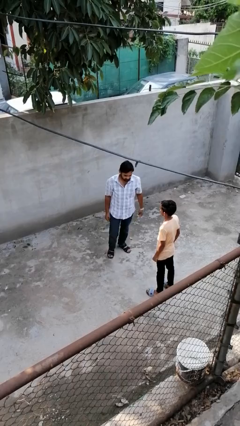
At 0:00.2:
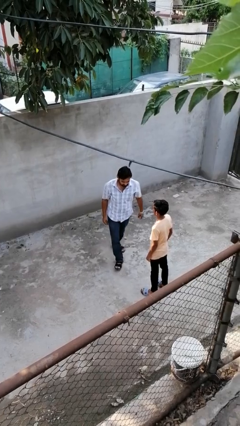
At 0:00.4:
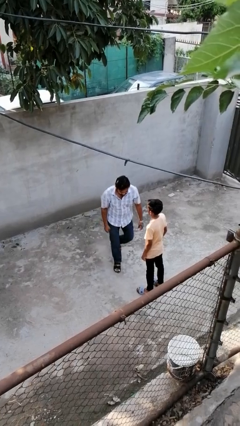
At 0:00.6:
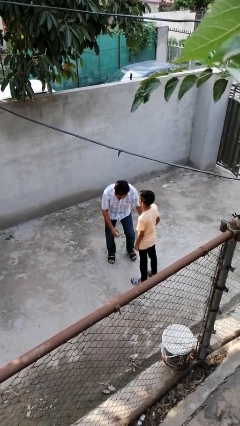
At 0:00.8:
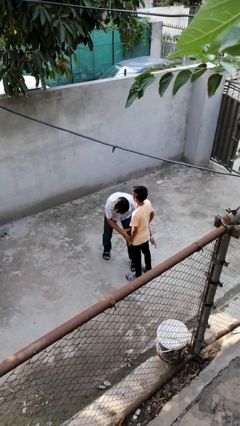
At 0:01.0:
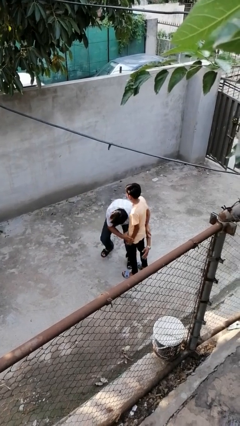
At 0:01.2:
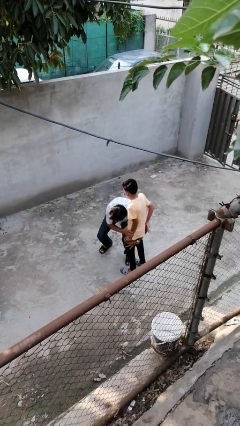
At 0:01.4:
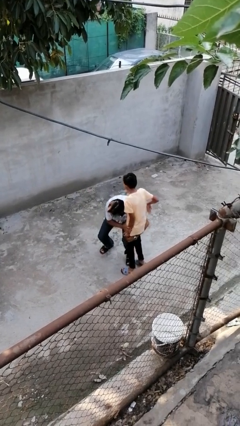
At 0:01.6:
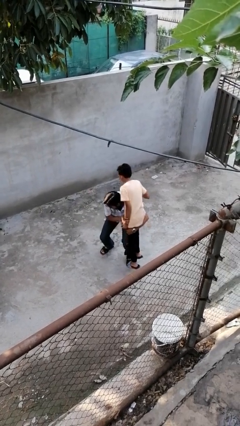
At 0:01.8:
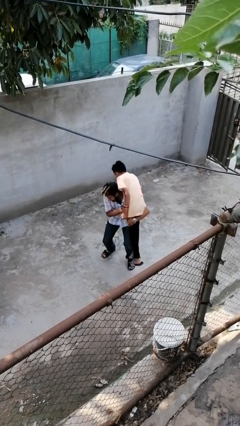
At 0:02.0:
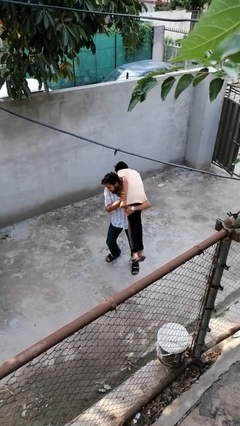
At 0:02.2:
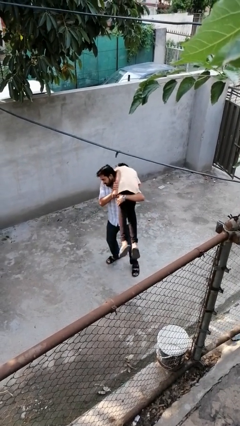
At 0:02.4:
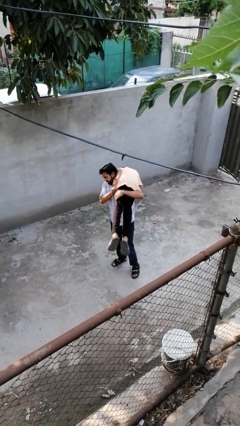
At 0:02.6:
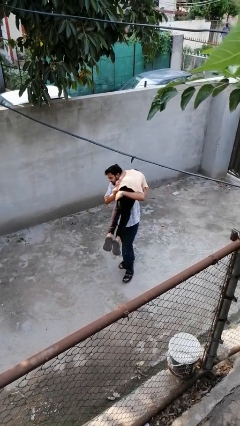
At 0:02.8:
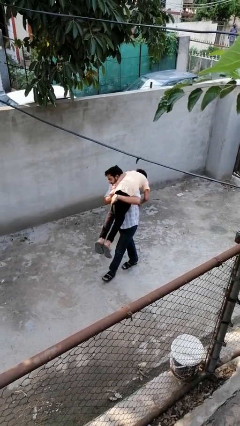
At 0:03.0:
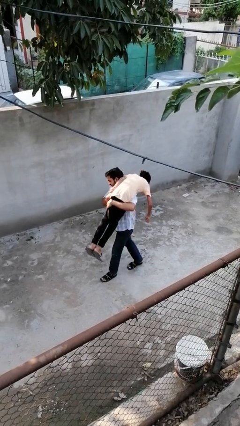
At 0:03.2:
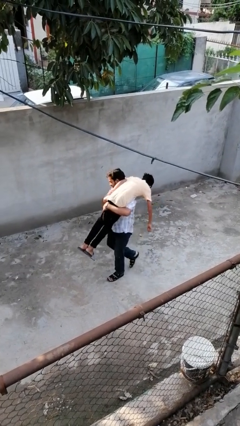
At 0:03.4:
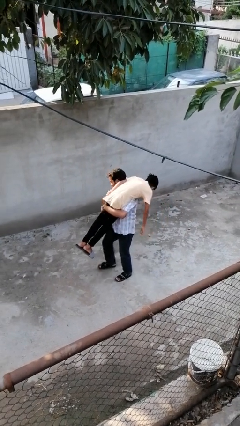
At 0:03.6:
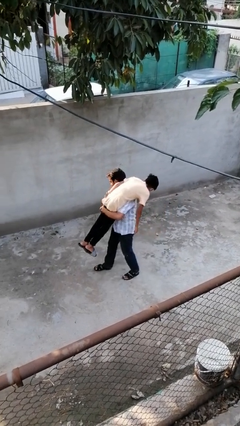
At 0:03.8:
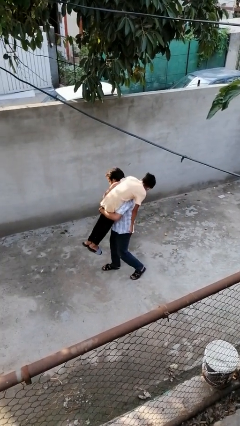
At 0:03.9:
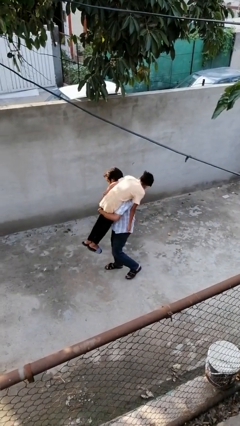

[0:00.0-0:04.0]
person carries person over shoulder

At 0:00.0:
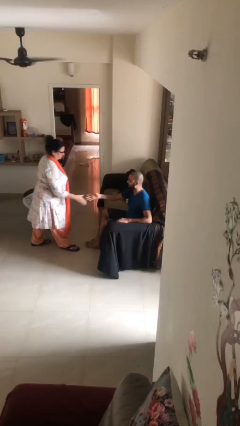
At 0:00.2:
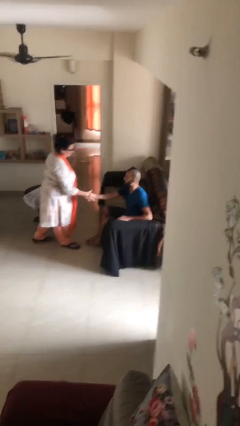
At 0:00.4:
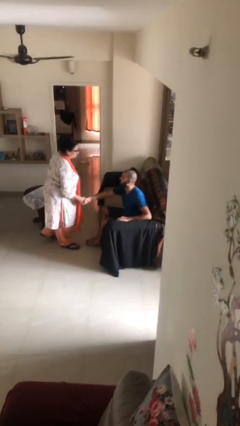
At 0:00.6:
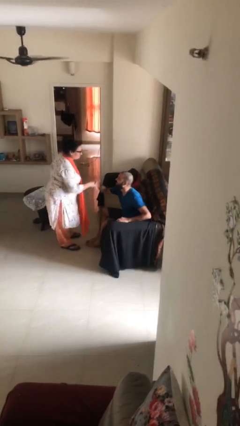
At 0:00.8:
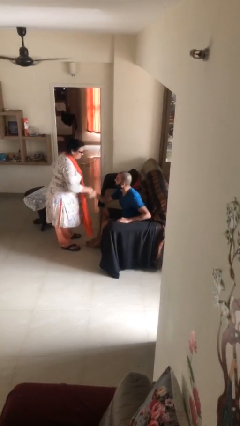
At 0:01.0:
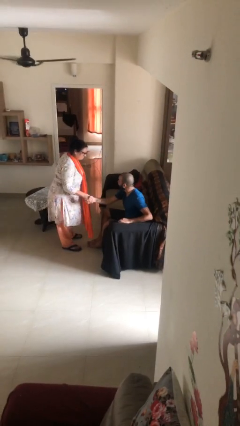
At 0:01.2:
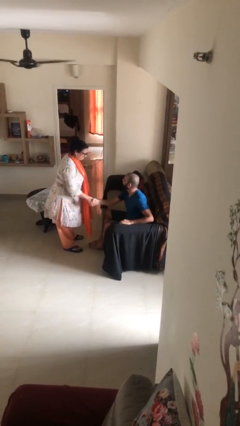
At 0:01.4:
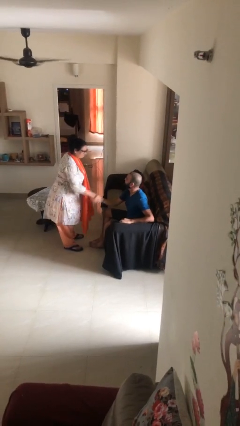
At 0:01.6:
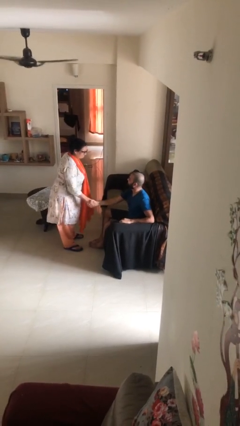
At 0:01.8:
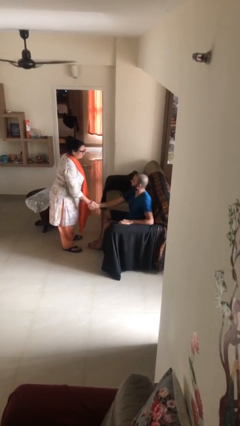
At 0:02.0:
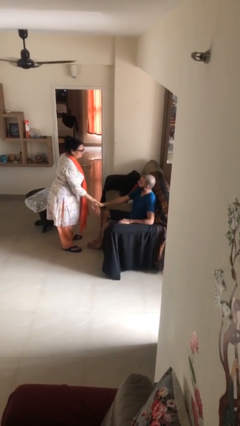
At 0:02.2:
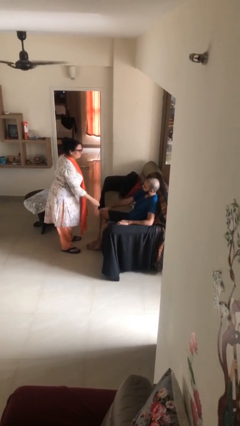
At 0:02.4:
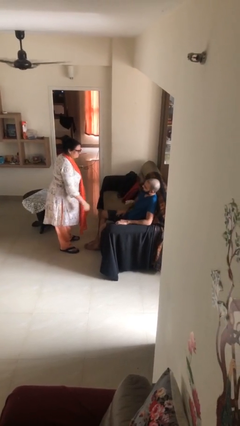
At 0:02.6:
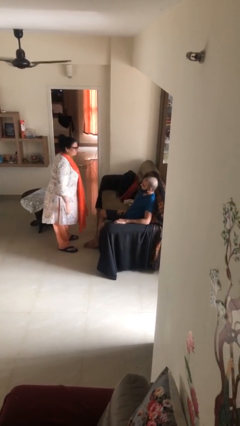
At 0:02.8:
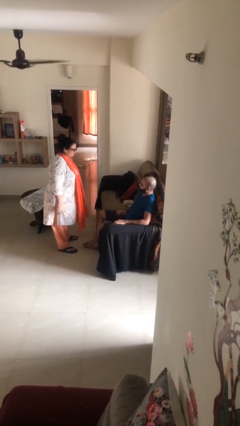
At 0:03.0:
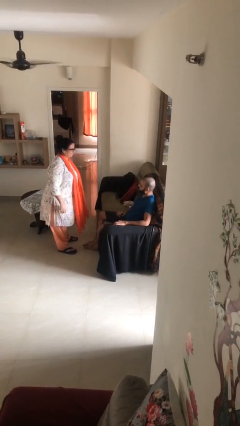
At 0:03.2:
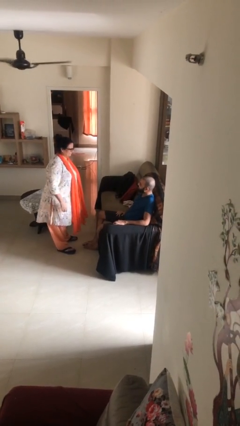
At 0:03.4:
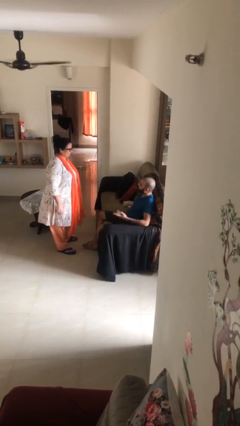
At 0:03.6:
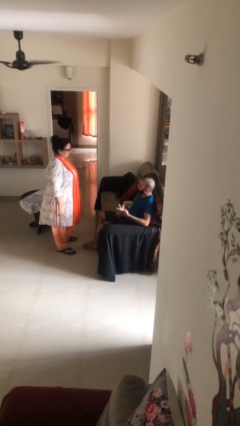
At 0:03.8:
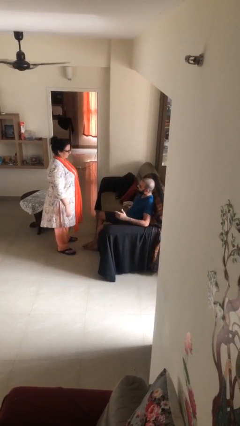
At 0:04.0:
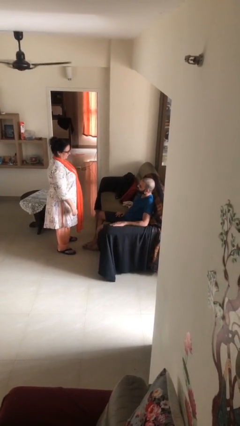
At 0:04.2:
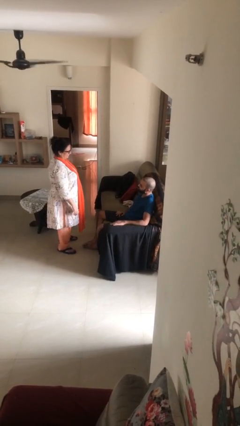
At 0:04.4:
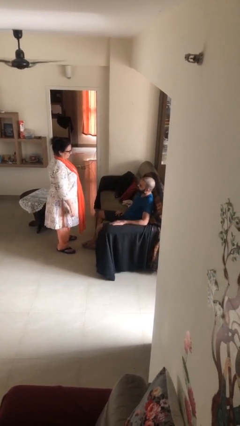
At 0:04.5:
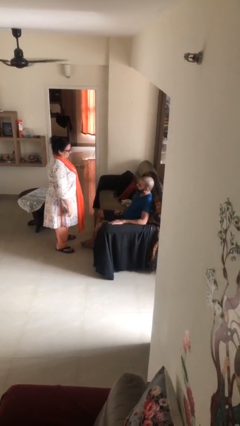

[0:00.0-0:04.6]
person shakes hand

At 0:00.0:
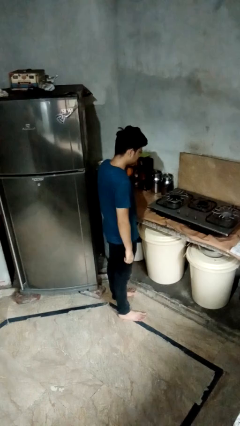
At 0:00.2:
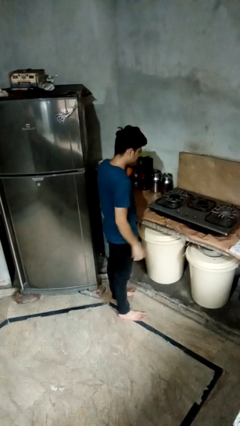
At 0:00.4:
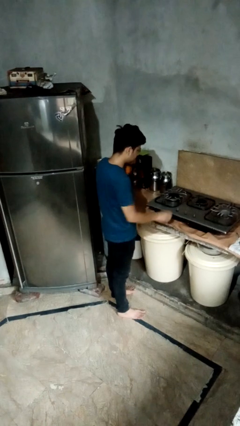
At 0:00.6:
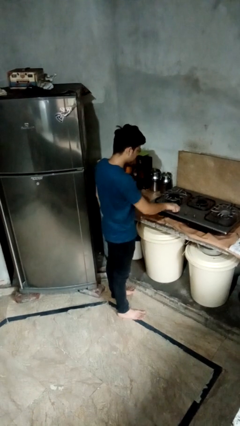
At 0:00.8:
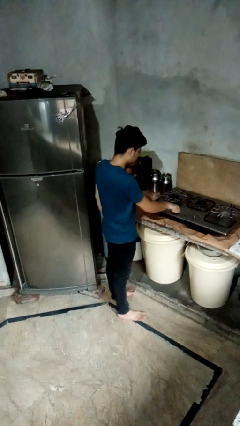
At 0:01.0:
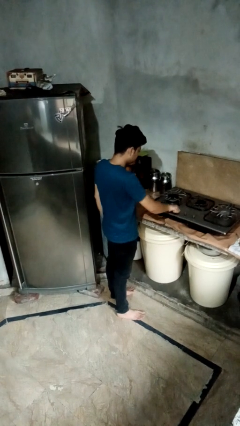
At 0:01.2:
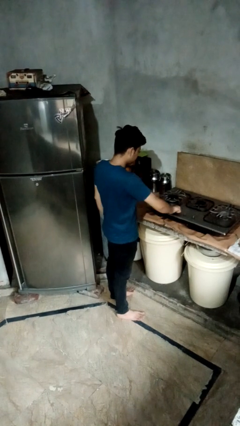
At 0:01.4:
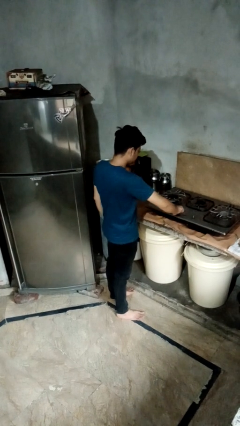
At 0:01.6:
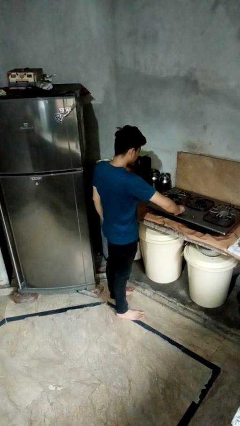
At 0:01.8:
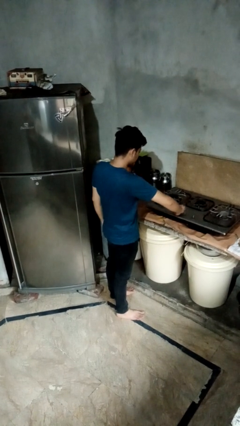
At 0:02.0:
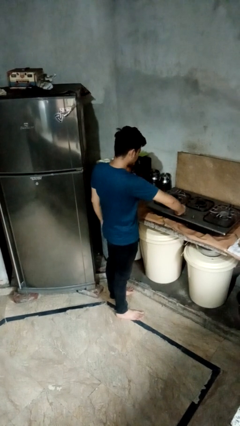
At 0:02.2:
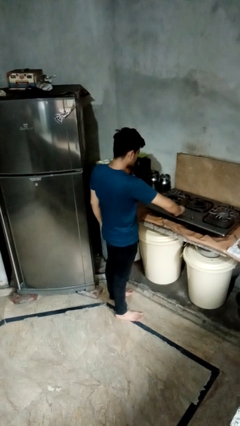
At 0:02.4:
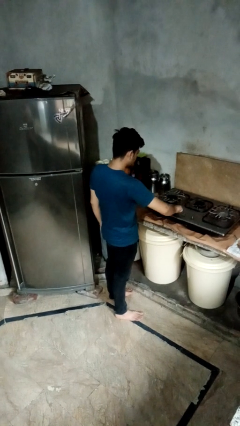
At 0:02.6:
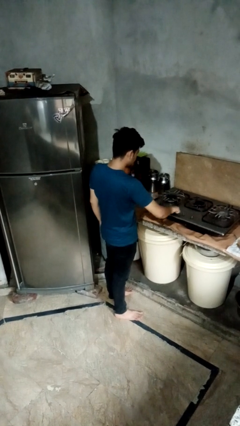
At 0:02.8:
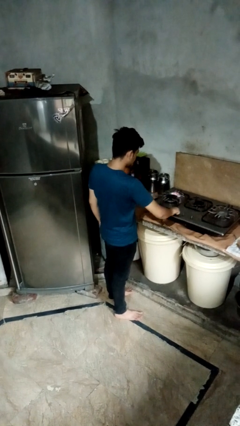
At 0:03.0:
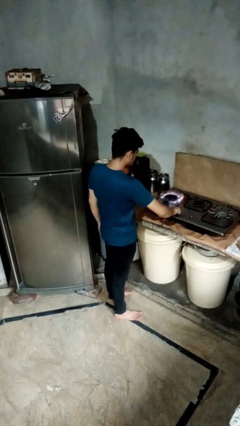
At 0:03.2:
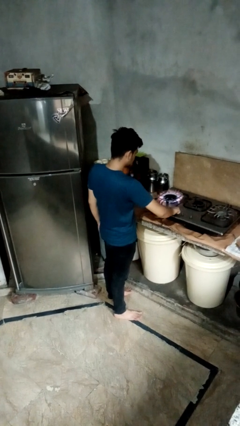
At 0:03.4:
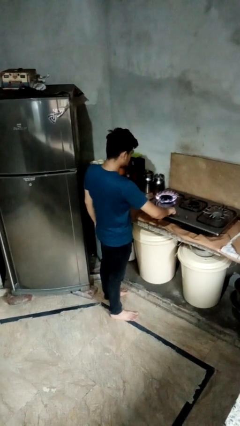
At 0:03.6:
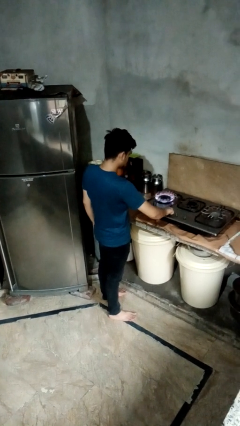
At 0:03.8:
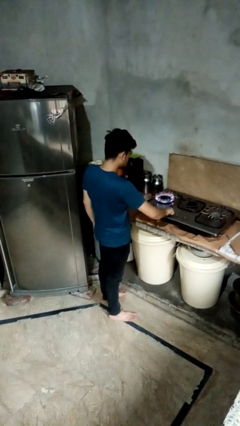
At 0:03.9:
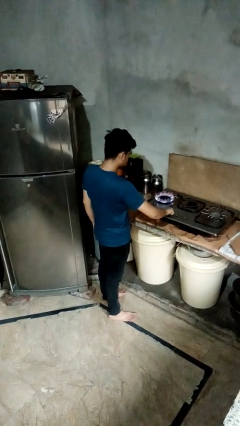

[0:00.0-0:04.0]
person turns on stovetop

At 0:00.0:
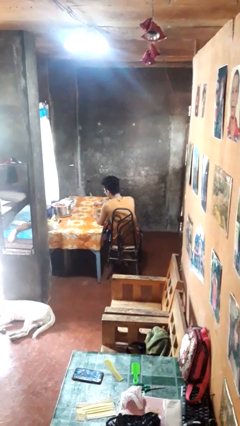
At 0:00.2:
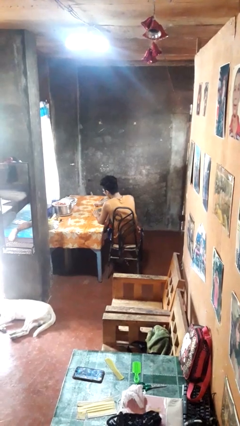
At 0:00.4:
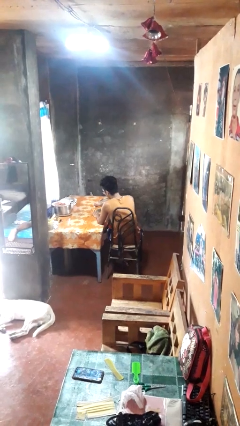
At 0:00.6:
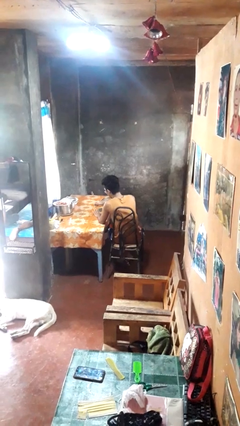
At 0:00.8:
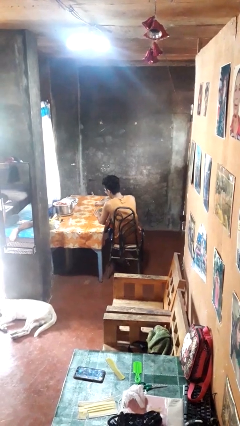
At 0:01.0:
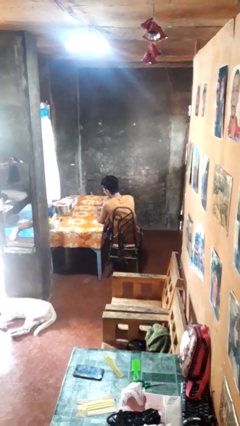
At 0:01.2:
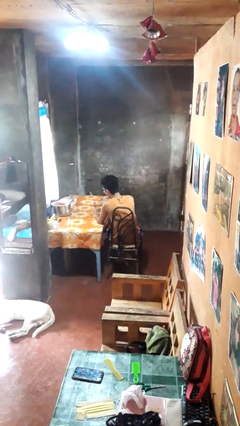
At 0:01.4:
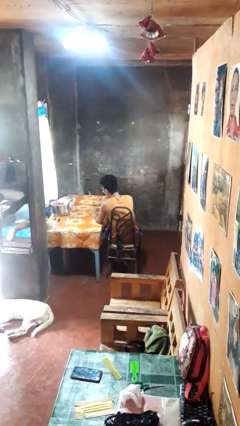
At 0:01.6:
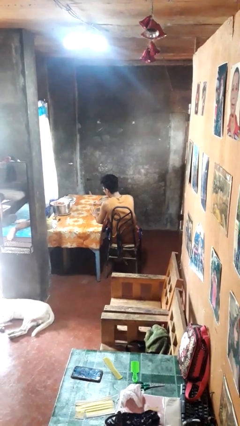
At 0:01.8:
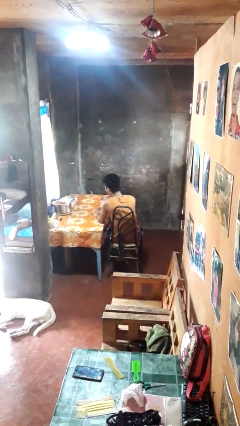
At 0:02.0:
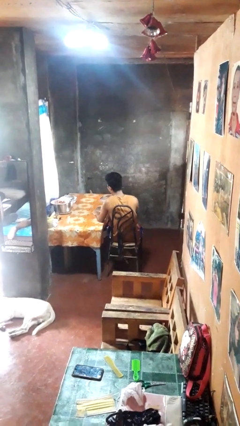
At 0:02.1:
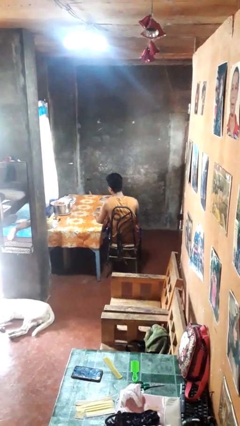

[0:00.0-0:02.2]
person clips fingernails

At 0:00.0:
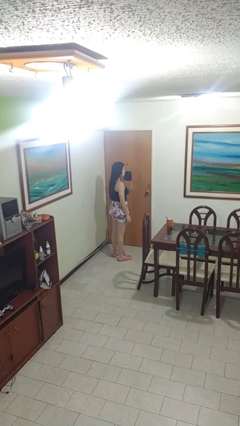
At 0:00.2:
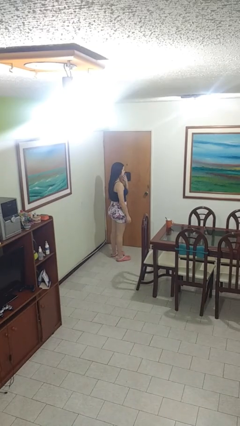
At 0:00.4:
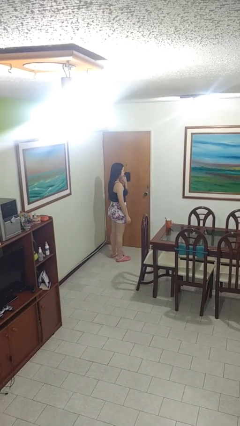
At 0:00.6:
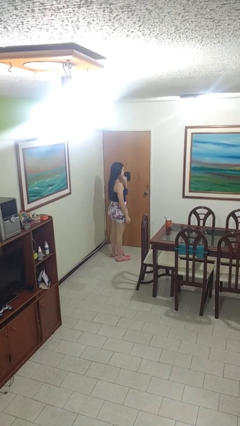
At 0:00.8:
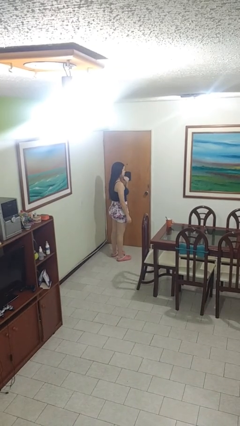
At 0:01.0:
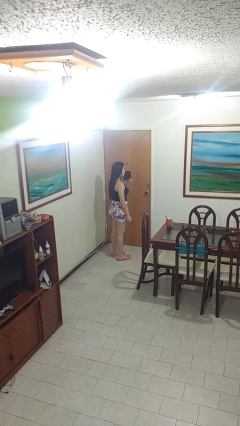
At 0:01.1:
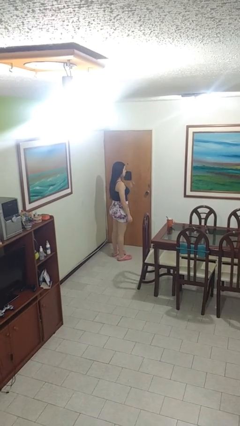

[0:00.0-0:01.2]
person strokes chin

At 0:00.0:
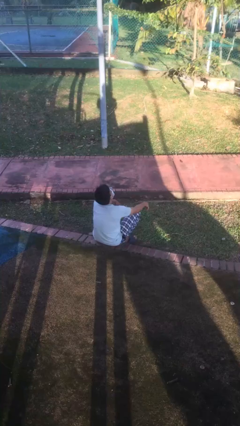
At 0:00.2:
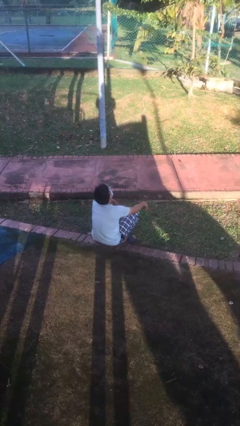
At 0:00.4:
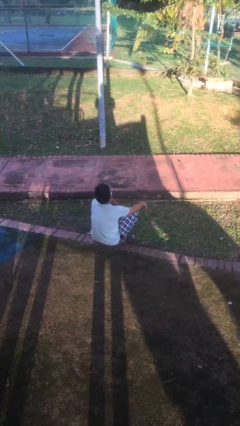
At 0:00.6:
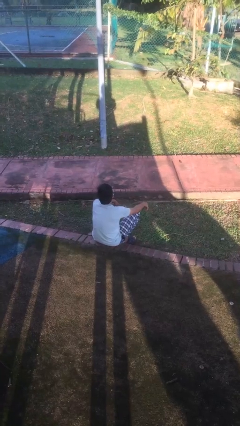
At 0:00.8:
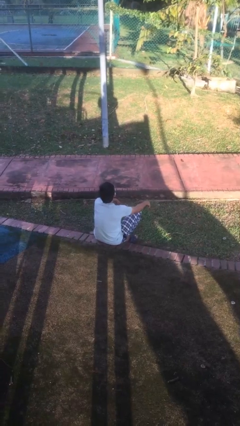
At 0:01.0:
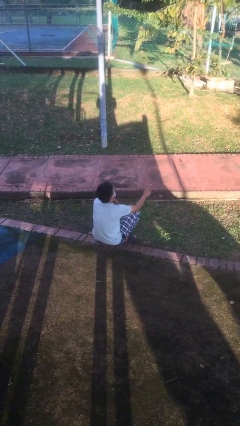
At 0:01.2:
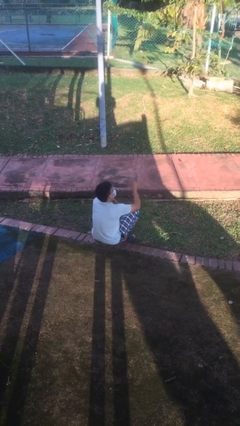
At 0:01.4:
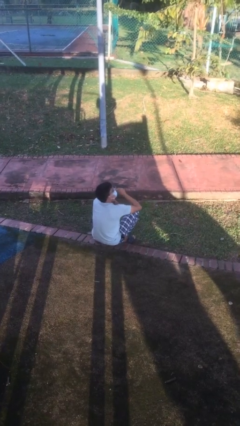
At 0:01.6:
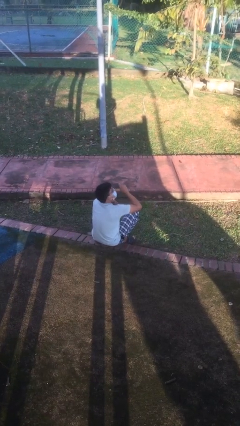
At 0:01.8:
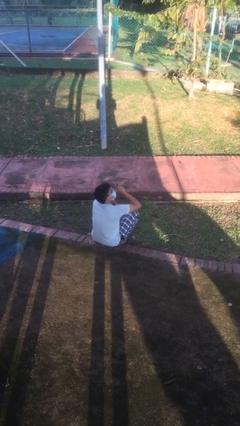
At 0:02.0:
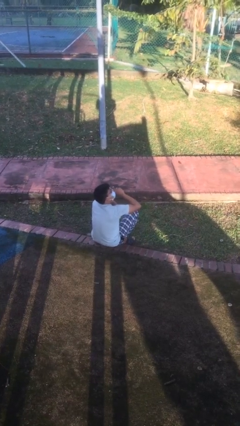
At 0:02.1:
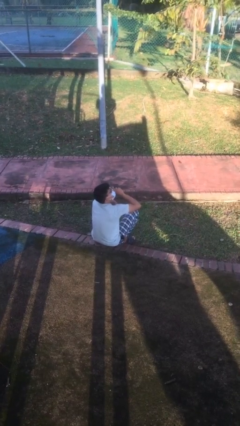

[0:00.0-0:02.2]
person gestures be quiet
